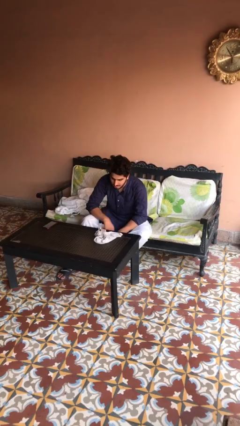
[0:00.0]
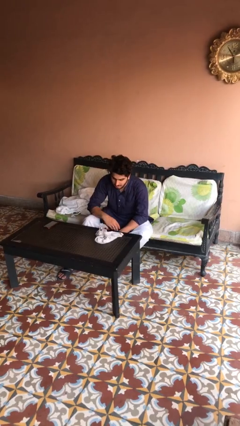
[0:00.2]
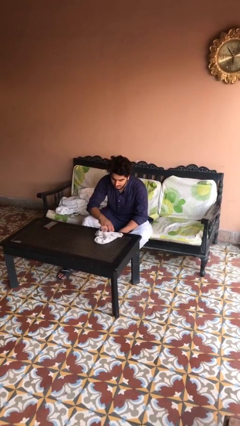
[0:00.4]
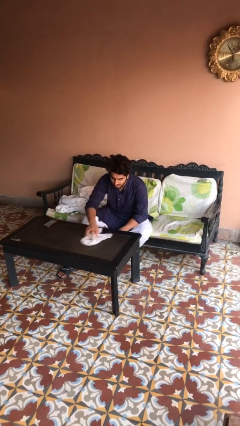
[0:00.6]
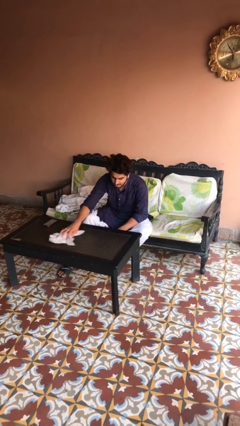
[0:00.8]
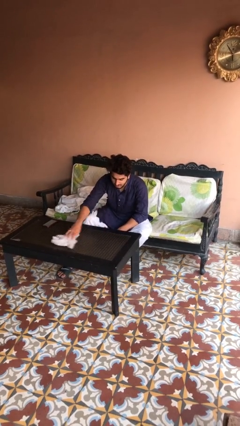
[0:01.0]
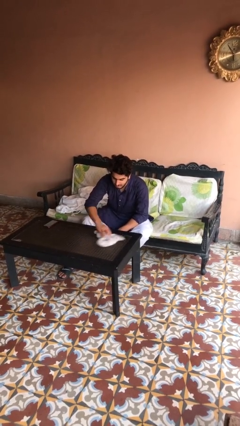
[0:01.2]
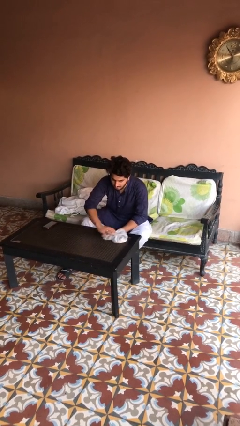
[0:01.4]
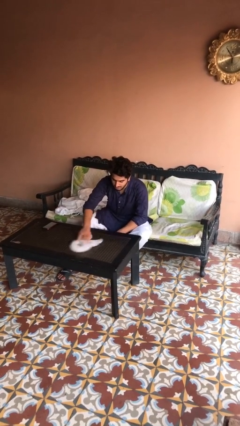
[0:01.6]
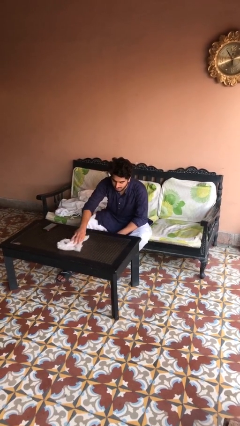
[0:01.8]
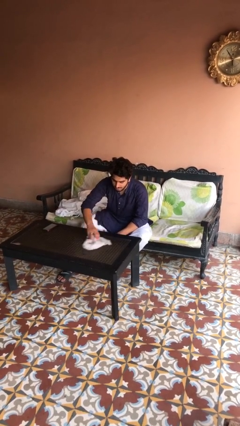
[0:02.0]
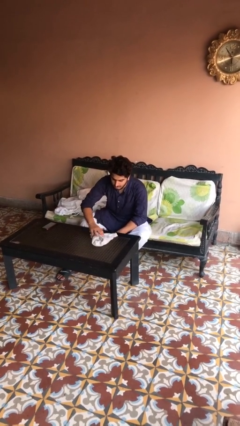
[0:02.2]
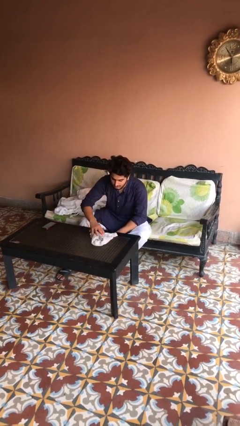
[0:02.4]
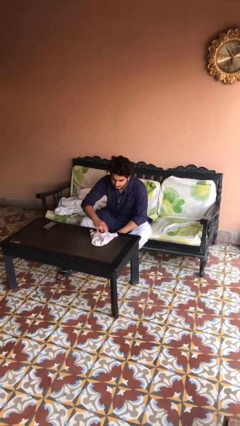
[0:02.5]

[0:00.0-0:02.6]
person cleans table with rag

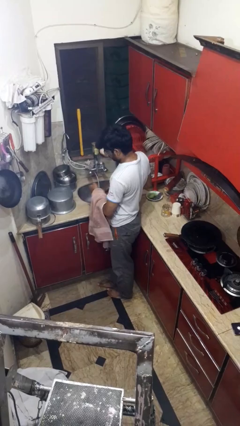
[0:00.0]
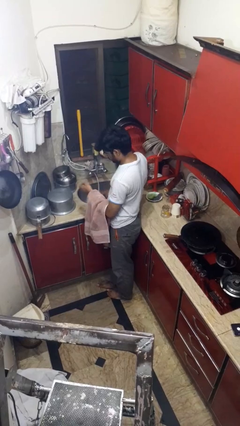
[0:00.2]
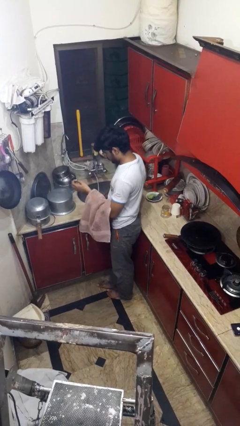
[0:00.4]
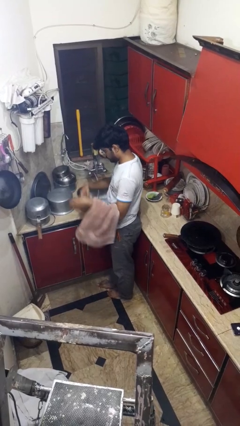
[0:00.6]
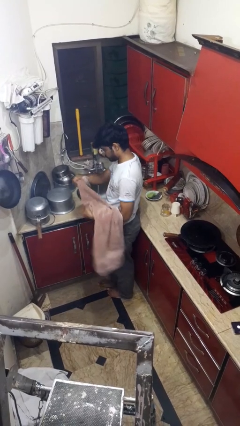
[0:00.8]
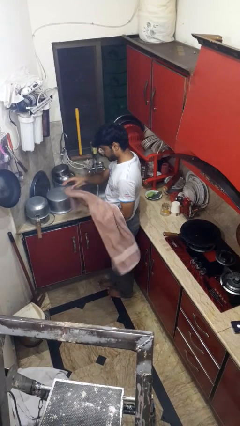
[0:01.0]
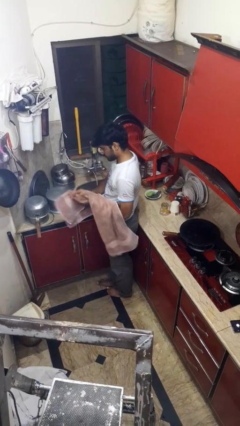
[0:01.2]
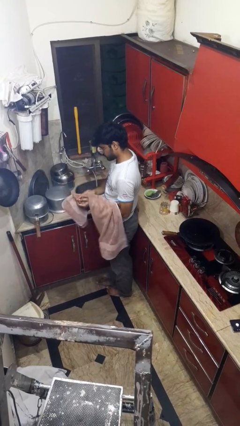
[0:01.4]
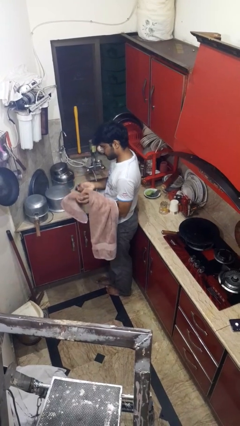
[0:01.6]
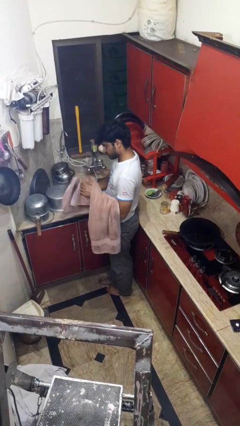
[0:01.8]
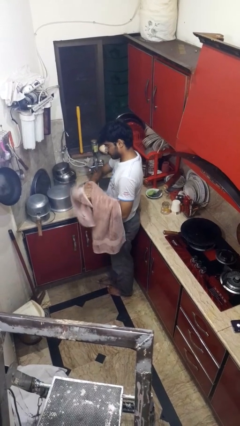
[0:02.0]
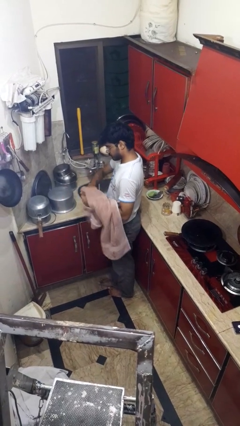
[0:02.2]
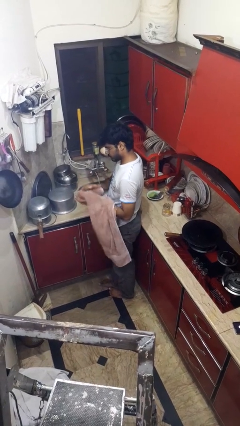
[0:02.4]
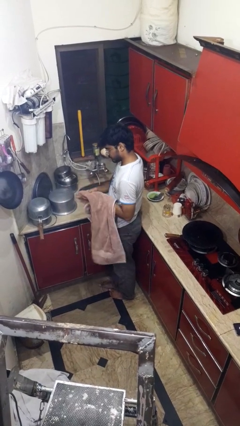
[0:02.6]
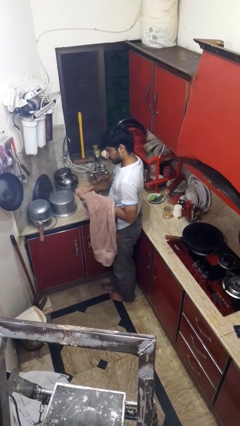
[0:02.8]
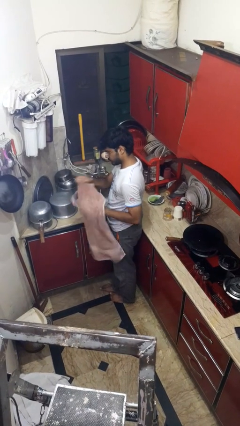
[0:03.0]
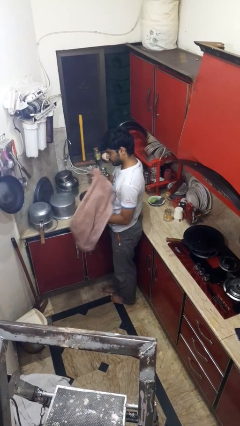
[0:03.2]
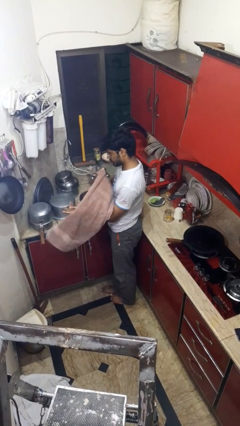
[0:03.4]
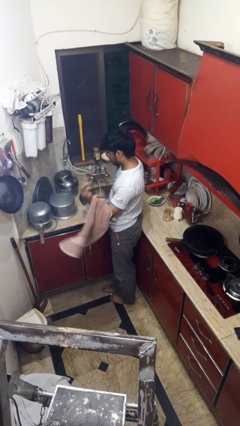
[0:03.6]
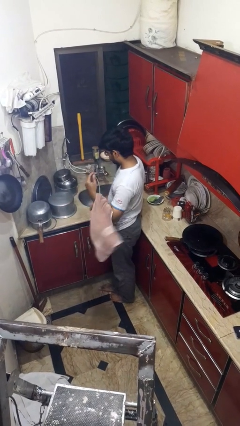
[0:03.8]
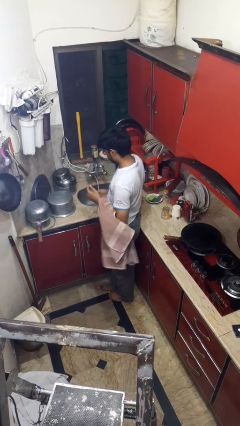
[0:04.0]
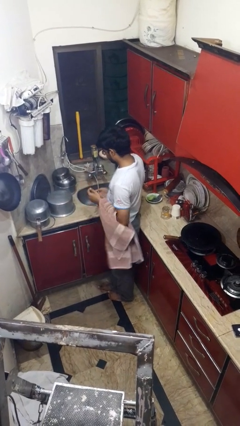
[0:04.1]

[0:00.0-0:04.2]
person dries hands with towel

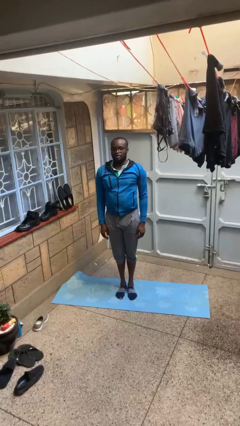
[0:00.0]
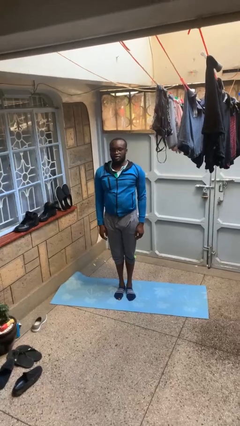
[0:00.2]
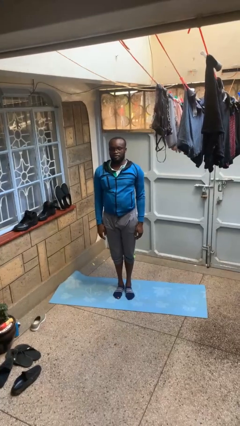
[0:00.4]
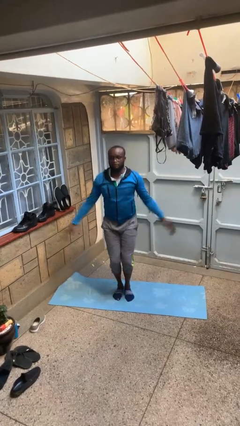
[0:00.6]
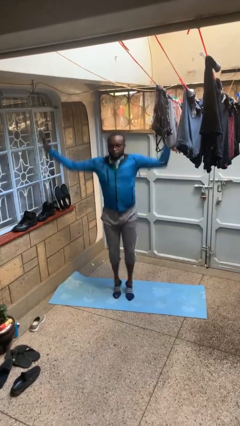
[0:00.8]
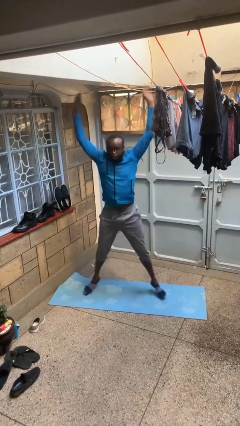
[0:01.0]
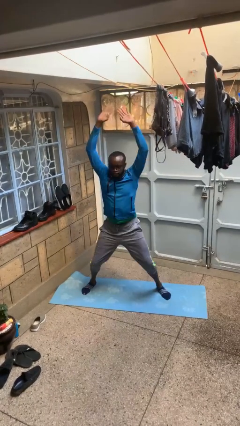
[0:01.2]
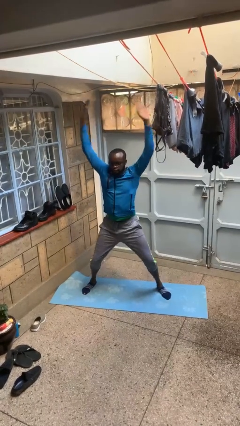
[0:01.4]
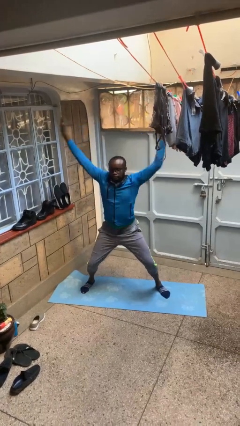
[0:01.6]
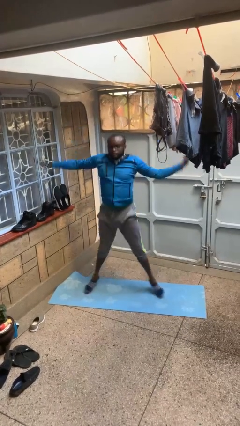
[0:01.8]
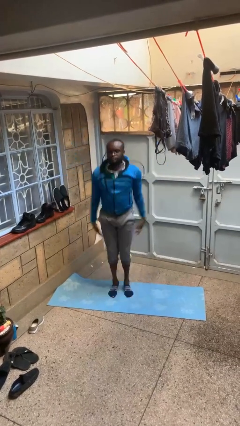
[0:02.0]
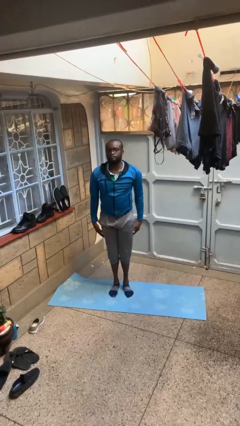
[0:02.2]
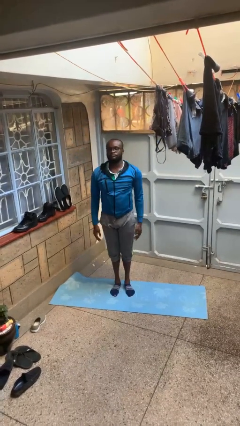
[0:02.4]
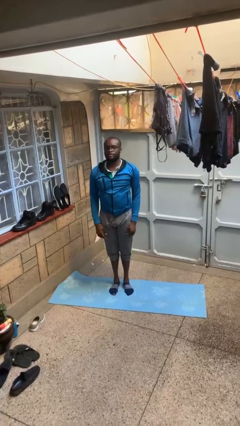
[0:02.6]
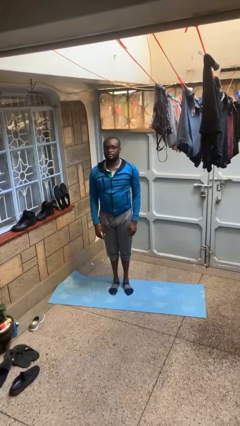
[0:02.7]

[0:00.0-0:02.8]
person exercises with jumping jacks

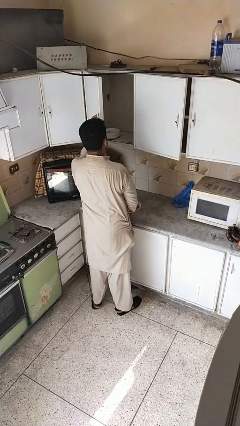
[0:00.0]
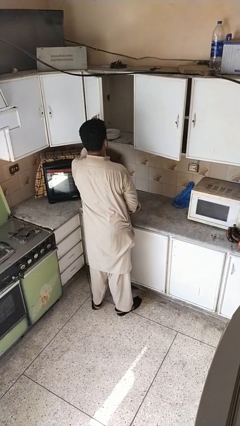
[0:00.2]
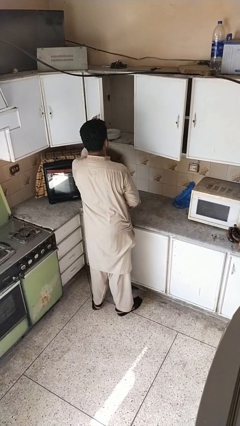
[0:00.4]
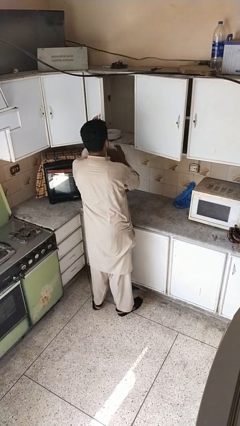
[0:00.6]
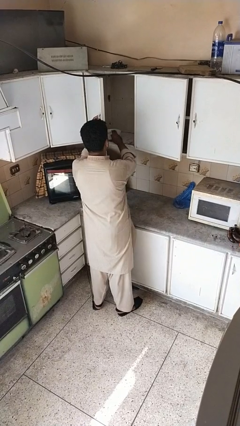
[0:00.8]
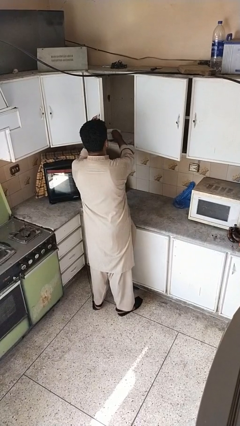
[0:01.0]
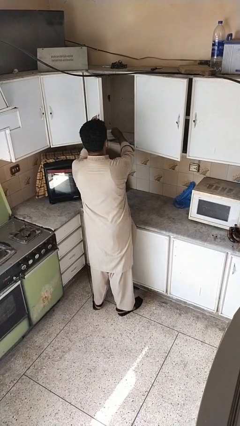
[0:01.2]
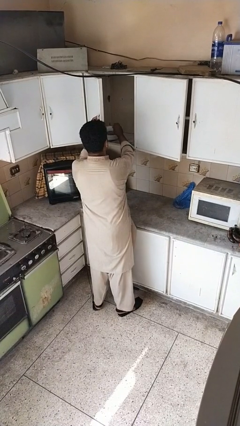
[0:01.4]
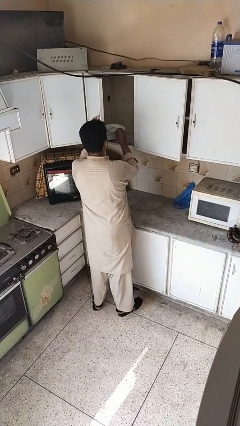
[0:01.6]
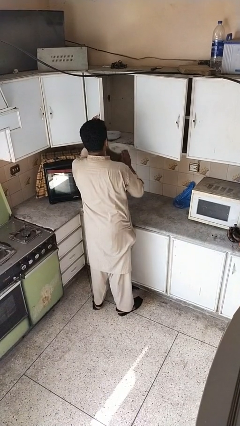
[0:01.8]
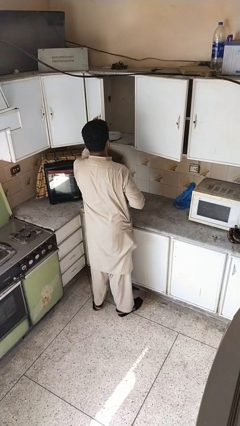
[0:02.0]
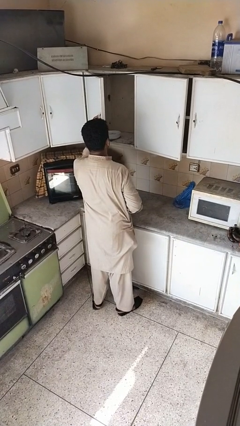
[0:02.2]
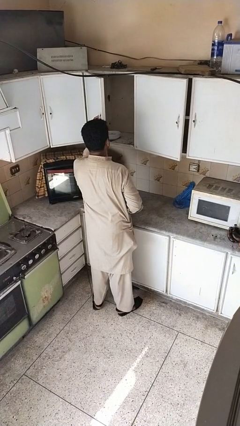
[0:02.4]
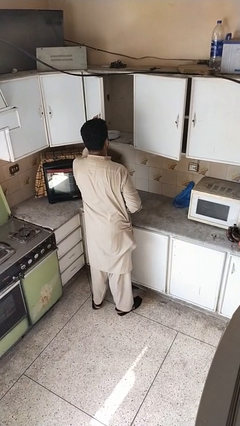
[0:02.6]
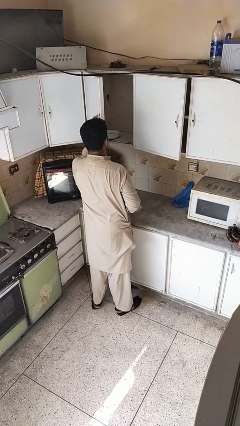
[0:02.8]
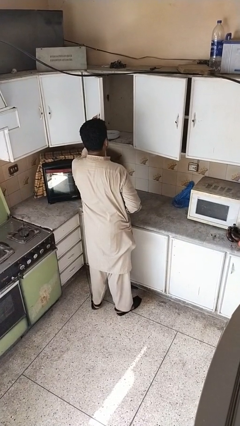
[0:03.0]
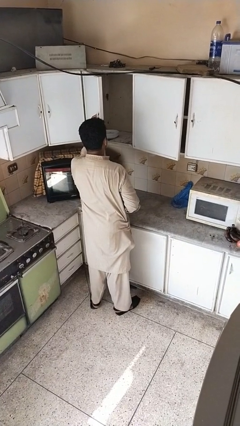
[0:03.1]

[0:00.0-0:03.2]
person takes object from cabinet

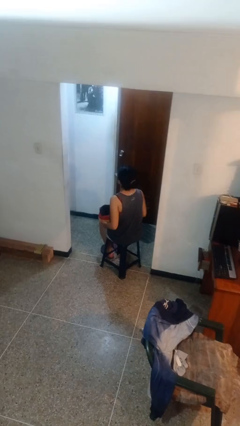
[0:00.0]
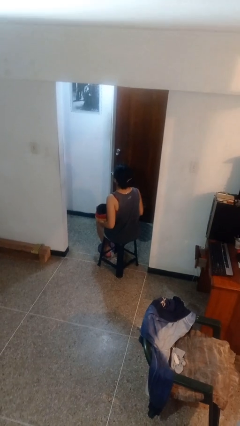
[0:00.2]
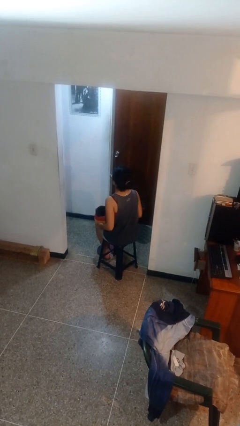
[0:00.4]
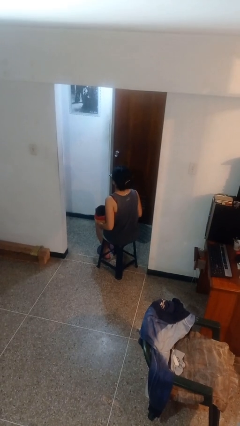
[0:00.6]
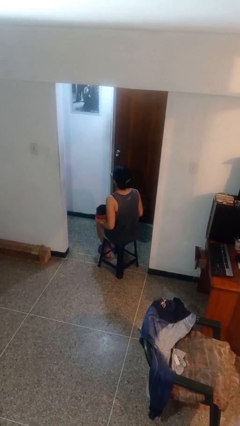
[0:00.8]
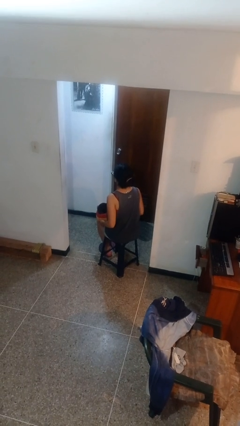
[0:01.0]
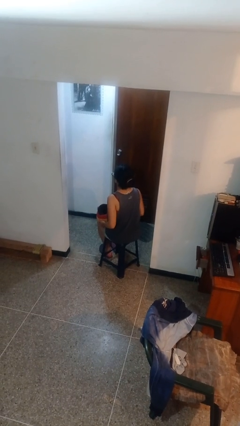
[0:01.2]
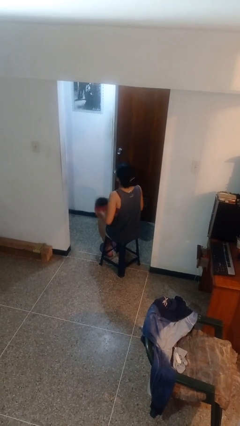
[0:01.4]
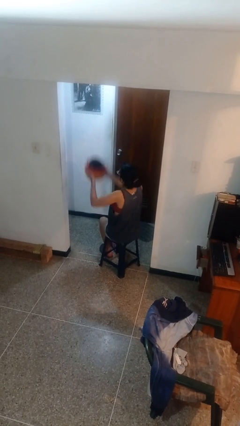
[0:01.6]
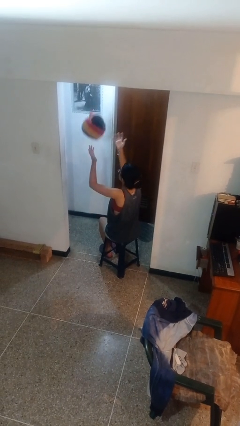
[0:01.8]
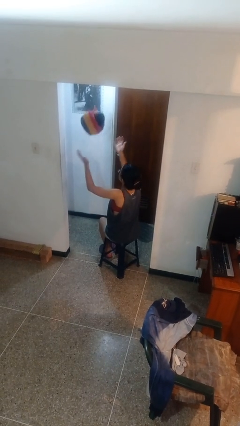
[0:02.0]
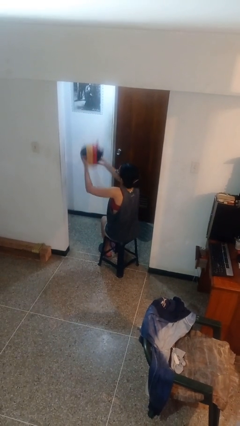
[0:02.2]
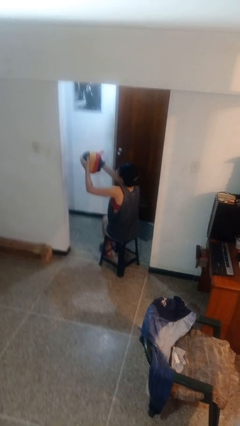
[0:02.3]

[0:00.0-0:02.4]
person drops object

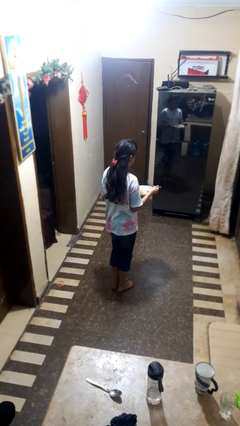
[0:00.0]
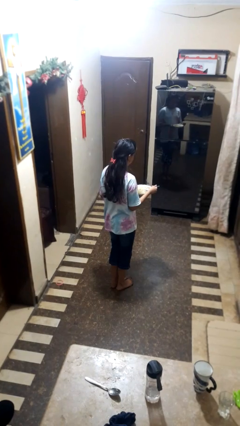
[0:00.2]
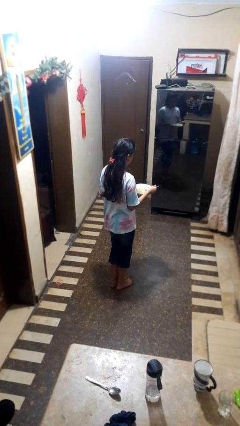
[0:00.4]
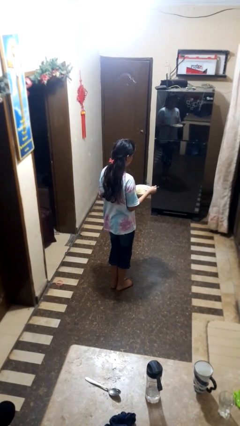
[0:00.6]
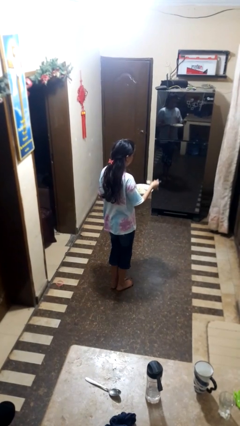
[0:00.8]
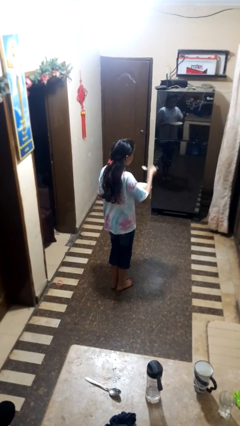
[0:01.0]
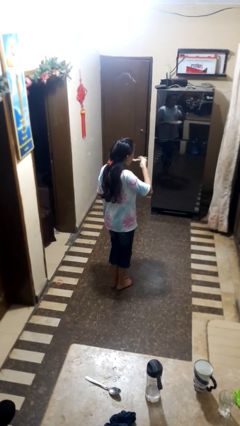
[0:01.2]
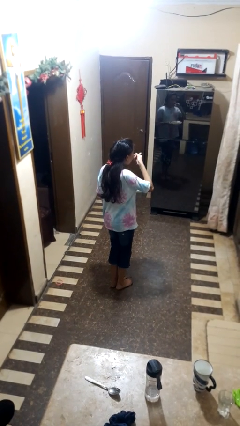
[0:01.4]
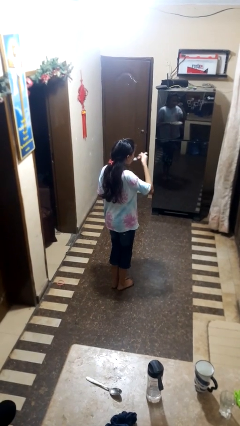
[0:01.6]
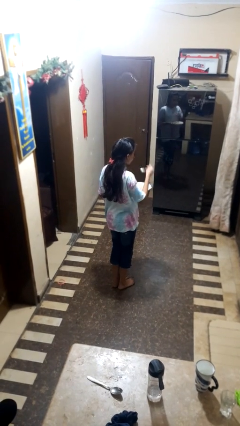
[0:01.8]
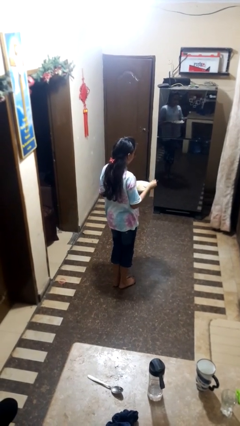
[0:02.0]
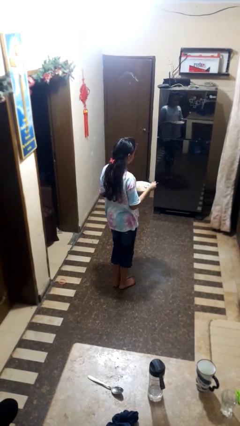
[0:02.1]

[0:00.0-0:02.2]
person eats with utensil
